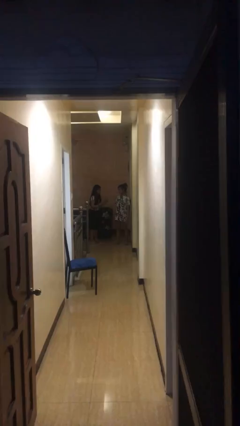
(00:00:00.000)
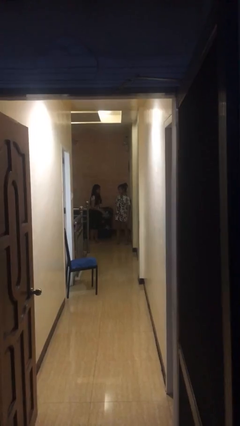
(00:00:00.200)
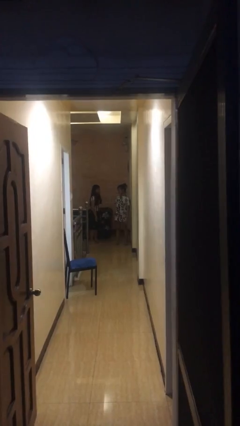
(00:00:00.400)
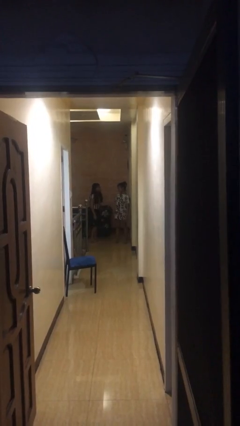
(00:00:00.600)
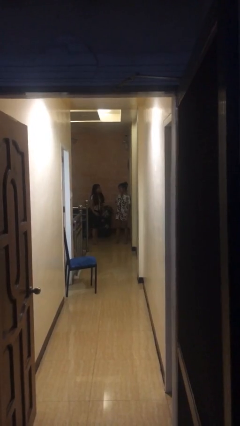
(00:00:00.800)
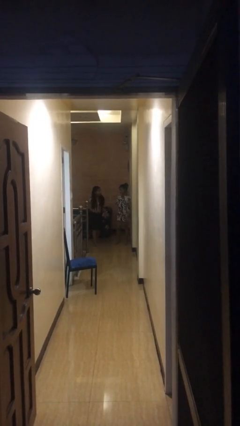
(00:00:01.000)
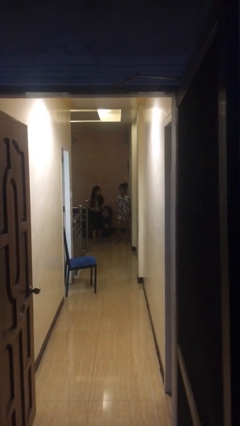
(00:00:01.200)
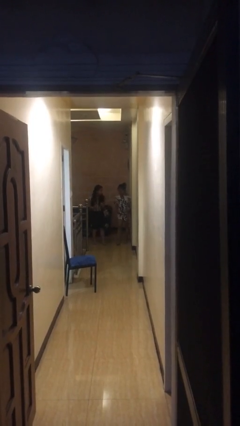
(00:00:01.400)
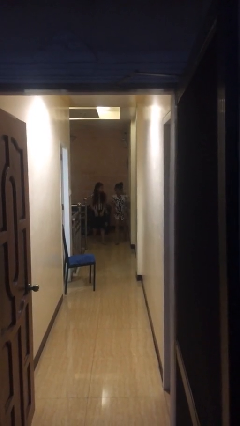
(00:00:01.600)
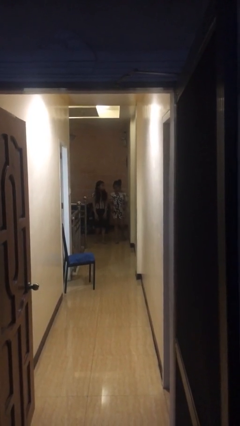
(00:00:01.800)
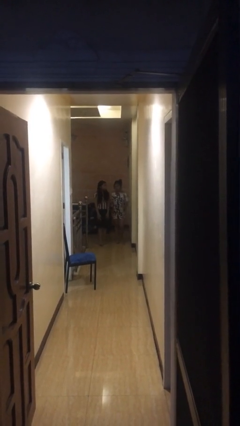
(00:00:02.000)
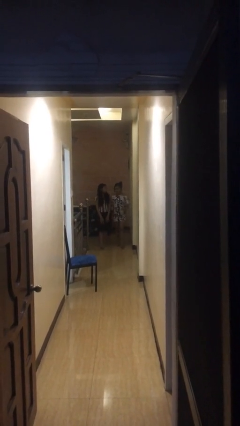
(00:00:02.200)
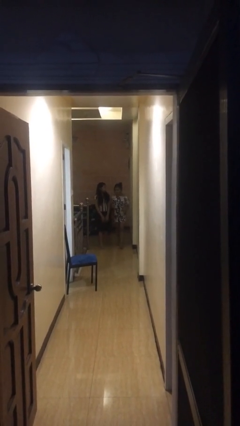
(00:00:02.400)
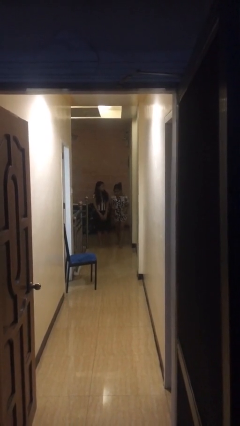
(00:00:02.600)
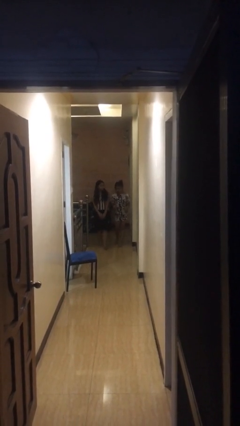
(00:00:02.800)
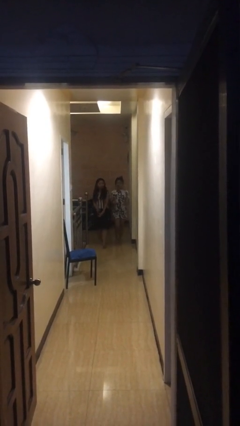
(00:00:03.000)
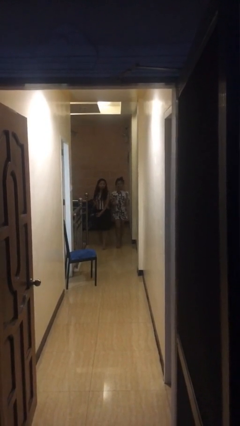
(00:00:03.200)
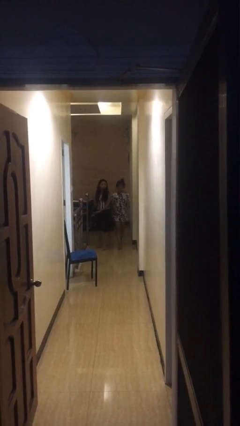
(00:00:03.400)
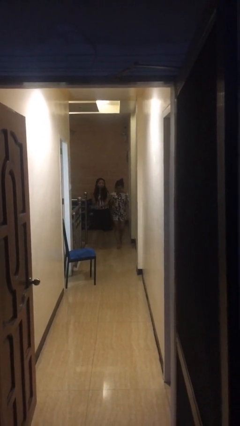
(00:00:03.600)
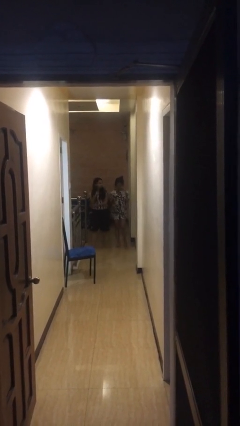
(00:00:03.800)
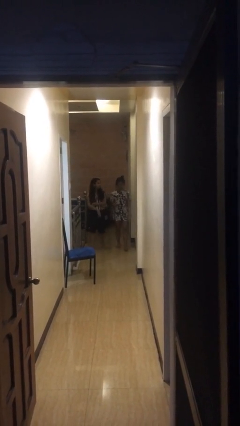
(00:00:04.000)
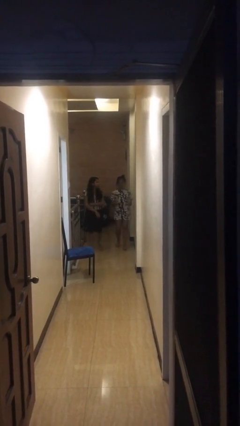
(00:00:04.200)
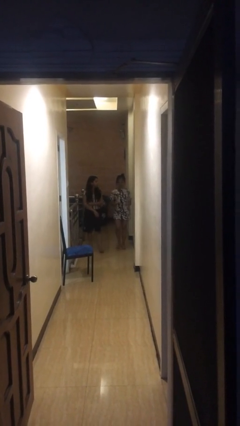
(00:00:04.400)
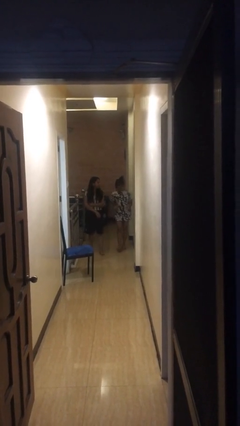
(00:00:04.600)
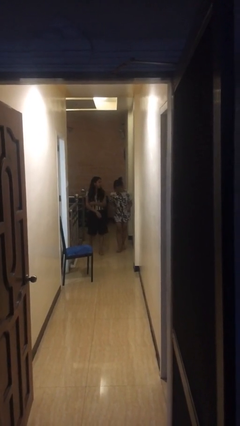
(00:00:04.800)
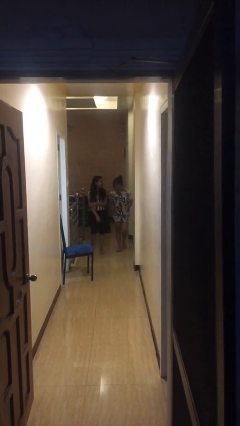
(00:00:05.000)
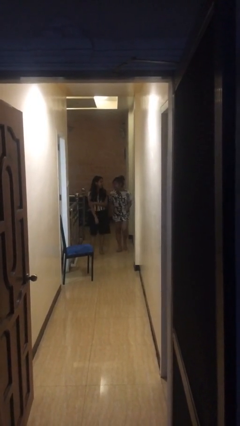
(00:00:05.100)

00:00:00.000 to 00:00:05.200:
person talks to person

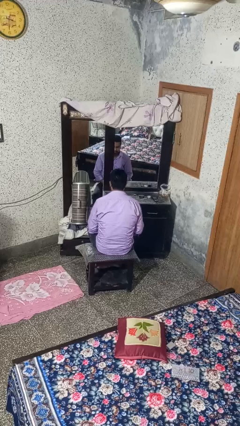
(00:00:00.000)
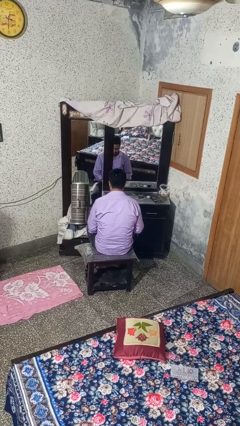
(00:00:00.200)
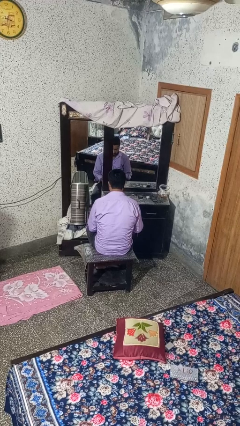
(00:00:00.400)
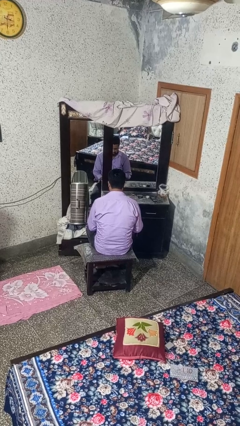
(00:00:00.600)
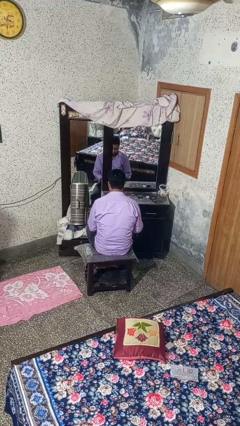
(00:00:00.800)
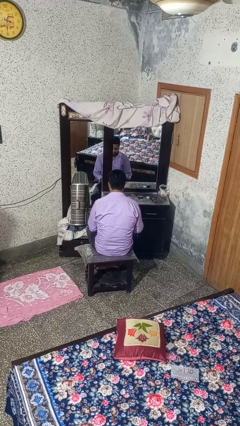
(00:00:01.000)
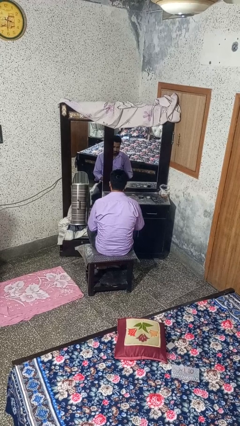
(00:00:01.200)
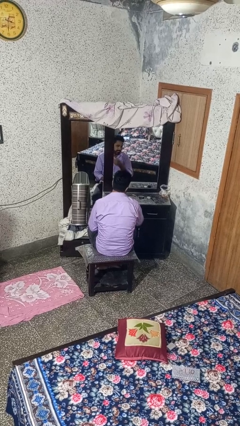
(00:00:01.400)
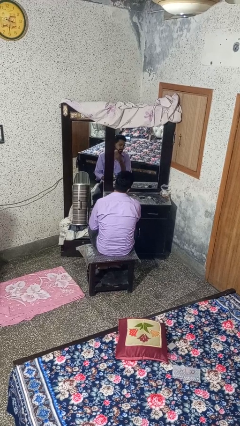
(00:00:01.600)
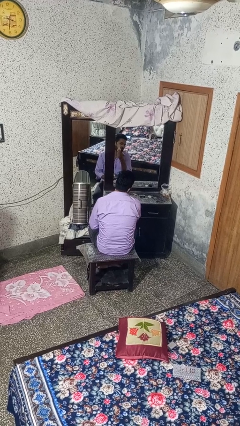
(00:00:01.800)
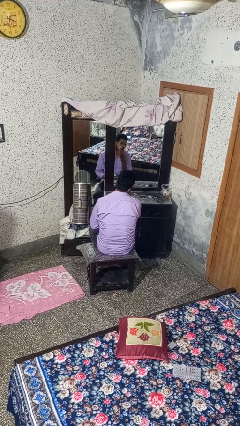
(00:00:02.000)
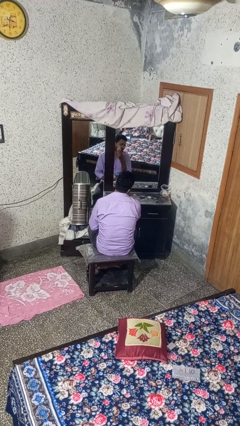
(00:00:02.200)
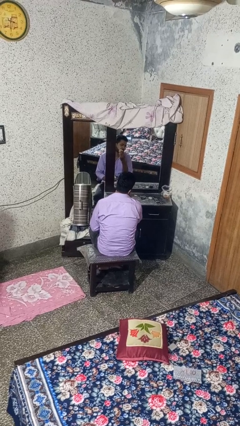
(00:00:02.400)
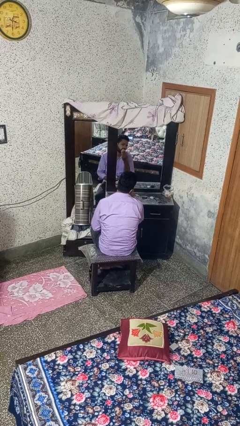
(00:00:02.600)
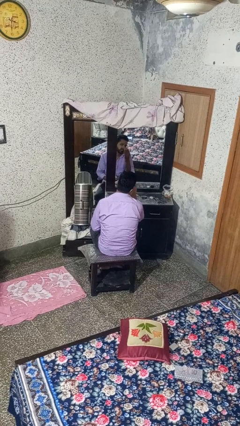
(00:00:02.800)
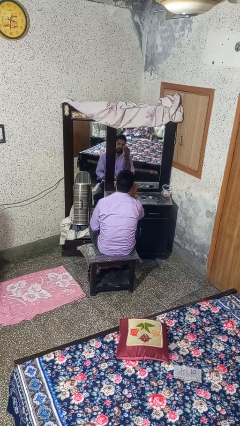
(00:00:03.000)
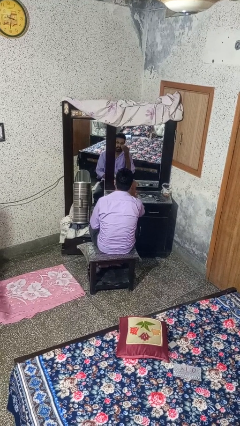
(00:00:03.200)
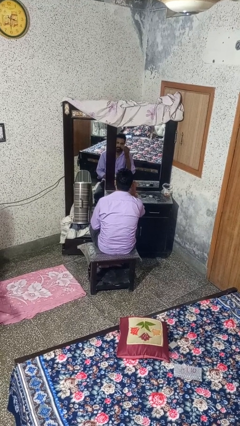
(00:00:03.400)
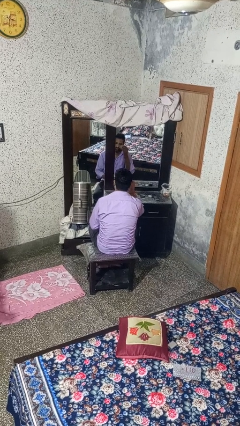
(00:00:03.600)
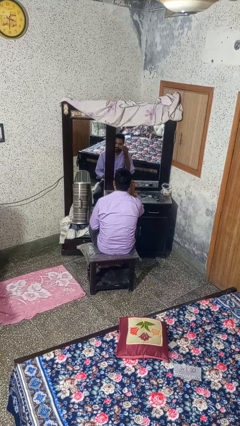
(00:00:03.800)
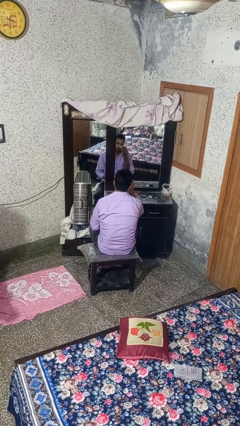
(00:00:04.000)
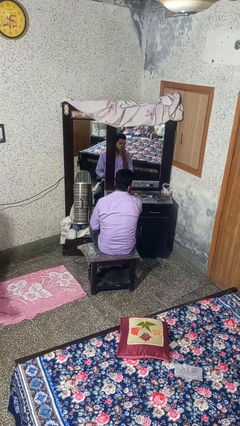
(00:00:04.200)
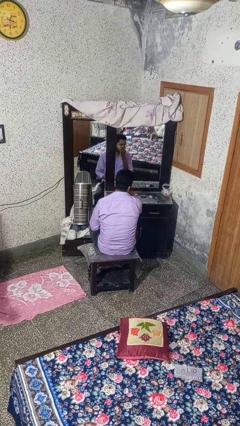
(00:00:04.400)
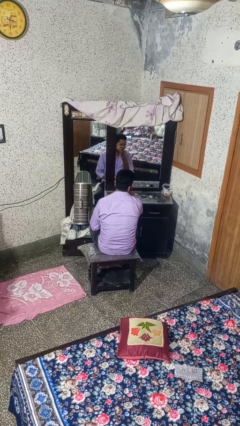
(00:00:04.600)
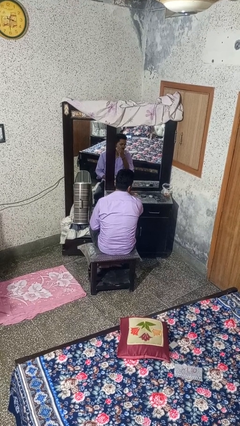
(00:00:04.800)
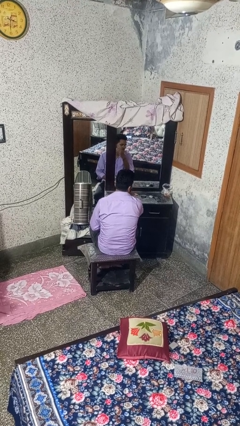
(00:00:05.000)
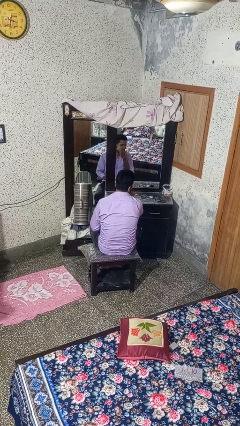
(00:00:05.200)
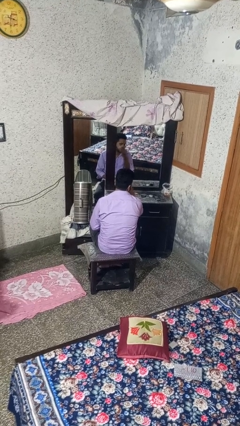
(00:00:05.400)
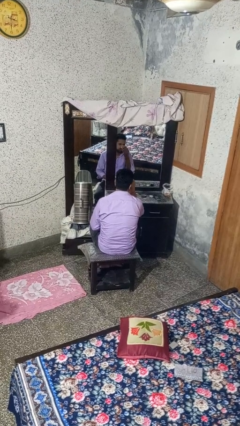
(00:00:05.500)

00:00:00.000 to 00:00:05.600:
person applies foundation makeup

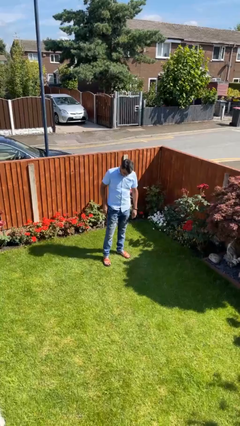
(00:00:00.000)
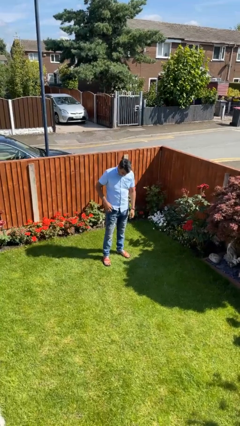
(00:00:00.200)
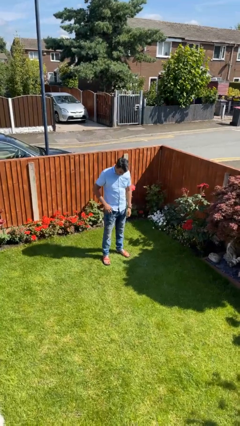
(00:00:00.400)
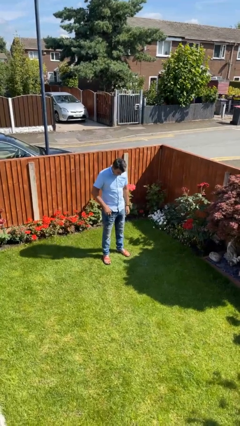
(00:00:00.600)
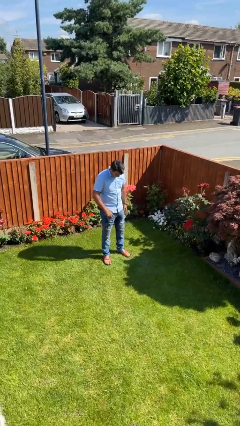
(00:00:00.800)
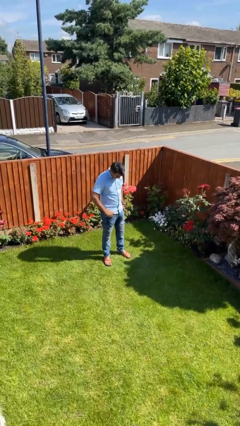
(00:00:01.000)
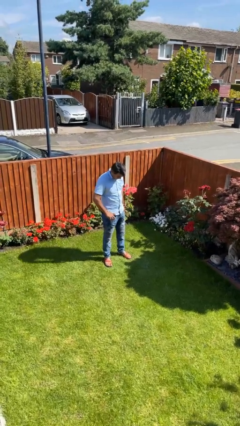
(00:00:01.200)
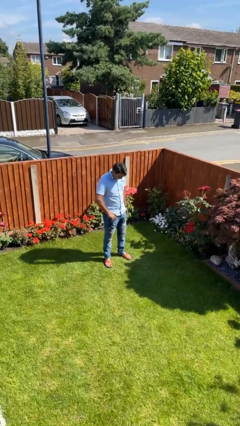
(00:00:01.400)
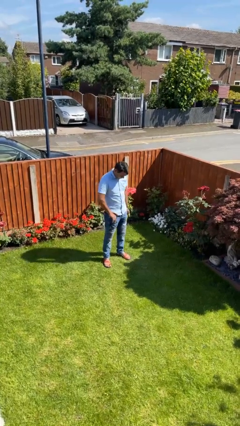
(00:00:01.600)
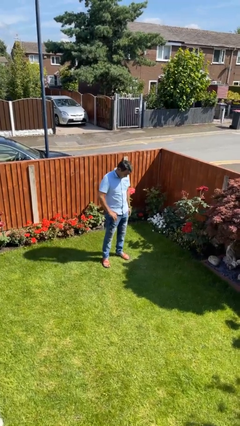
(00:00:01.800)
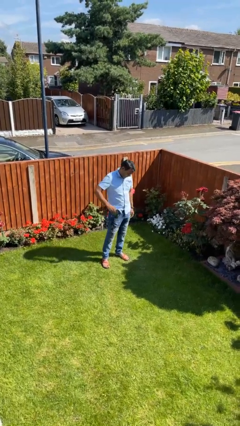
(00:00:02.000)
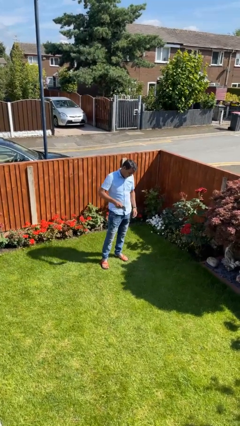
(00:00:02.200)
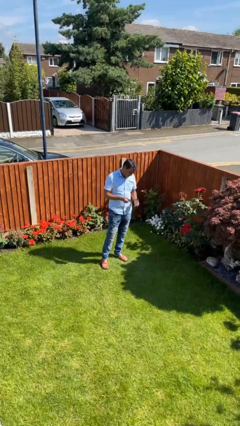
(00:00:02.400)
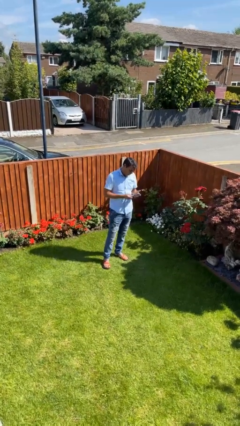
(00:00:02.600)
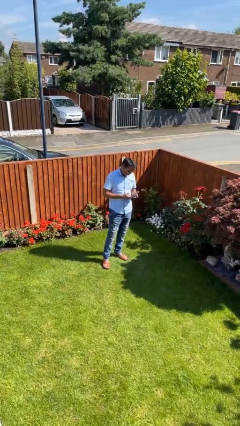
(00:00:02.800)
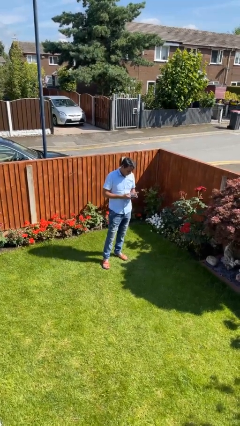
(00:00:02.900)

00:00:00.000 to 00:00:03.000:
person takes phone from pocket

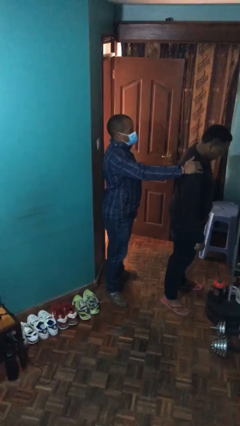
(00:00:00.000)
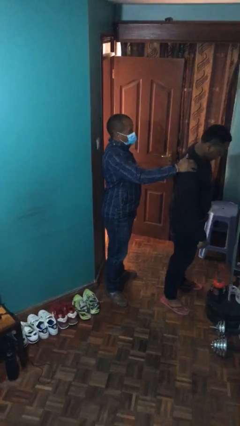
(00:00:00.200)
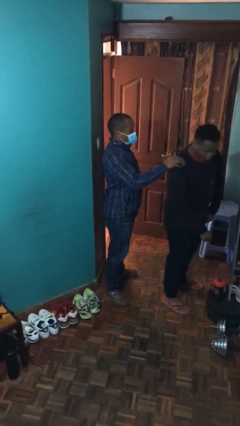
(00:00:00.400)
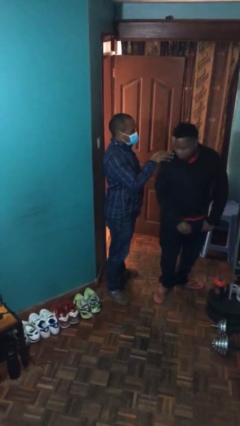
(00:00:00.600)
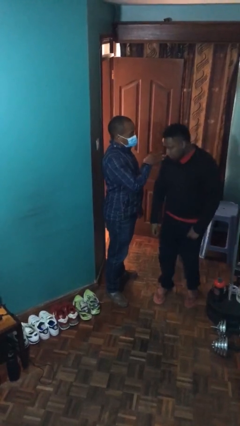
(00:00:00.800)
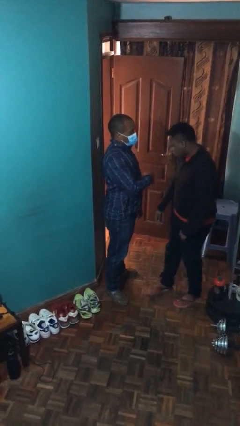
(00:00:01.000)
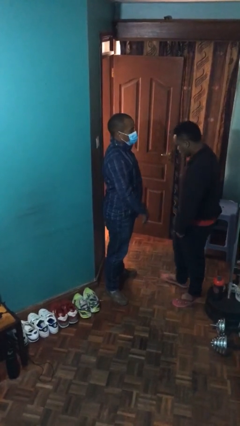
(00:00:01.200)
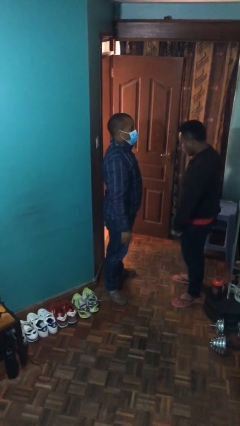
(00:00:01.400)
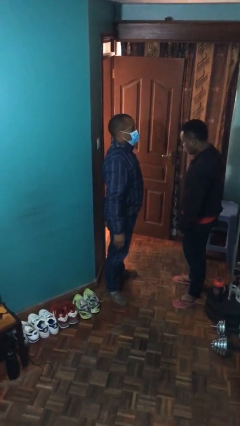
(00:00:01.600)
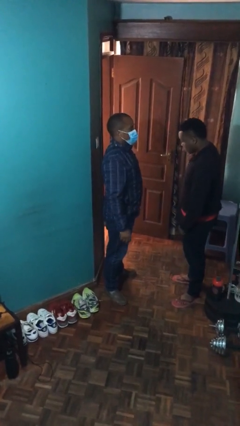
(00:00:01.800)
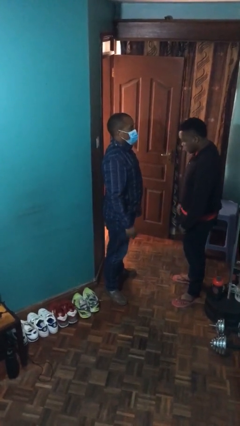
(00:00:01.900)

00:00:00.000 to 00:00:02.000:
person spins person around

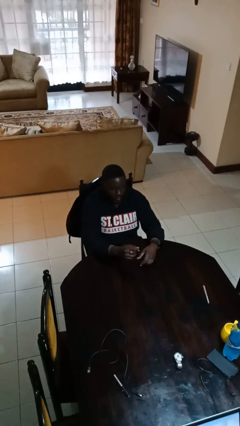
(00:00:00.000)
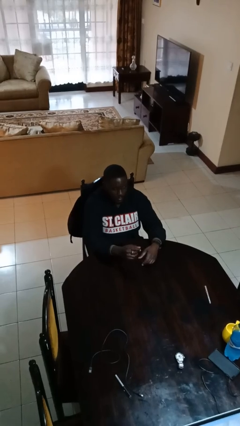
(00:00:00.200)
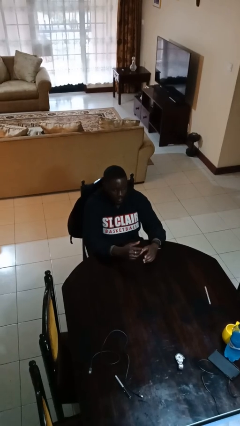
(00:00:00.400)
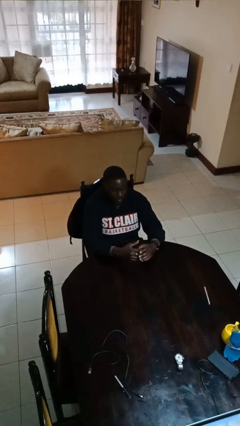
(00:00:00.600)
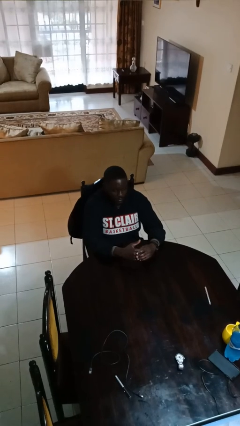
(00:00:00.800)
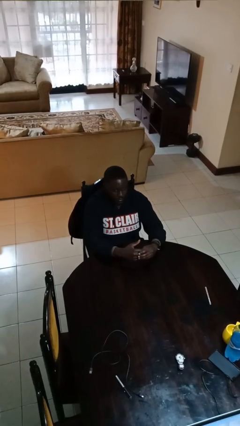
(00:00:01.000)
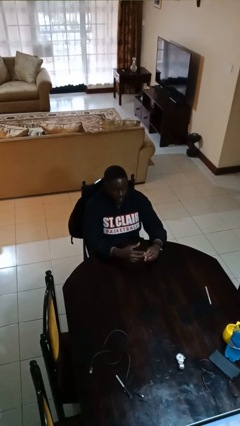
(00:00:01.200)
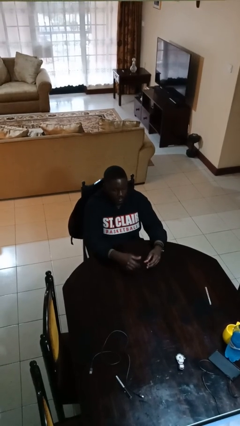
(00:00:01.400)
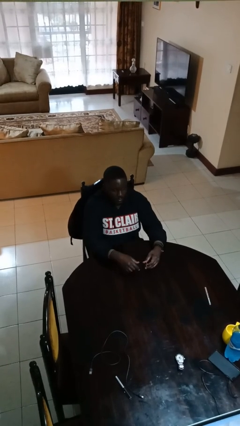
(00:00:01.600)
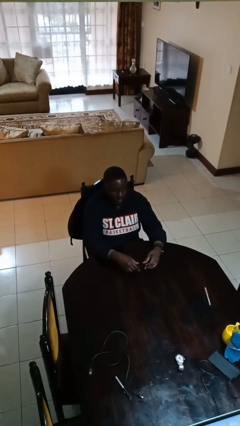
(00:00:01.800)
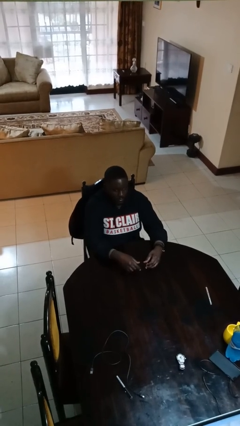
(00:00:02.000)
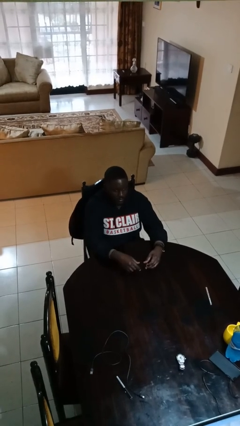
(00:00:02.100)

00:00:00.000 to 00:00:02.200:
person takes off ring
